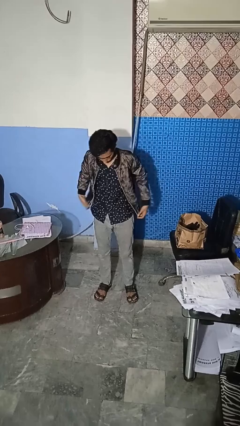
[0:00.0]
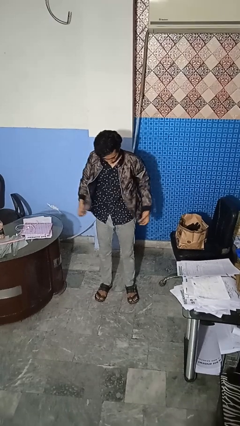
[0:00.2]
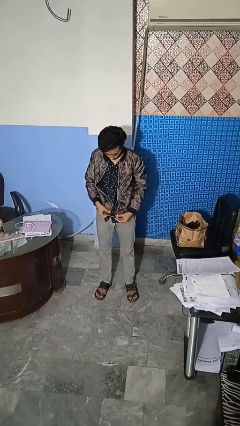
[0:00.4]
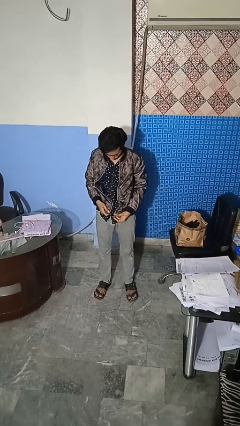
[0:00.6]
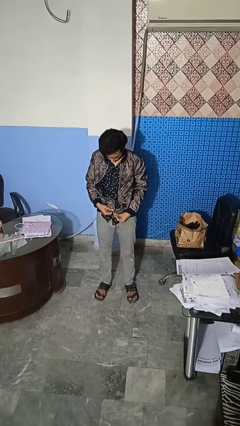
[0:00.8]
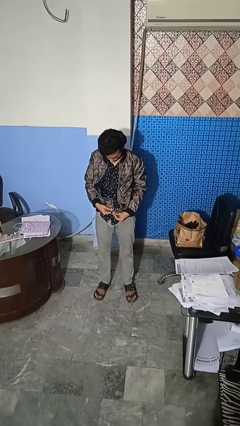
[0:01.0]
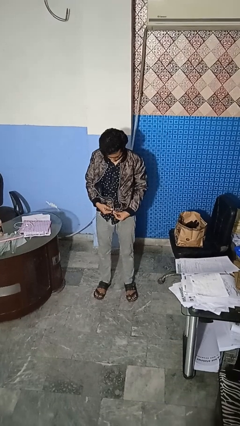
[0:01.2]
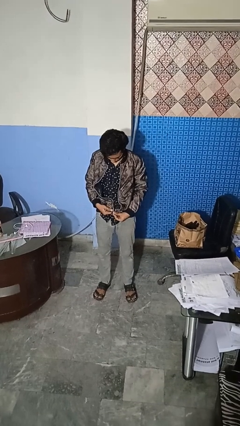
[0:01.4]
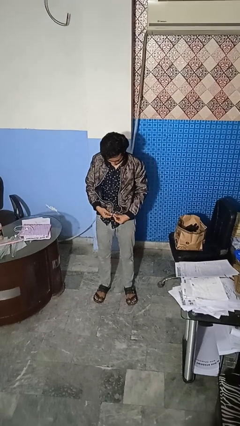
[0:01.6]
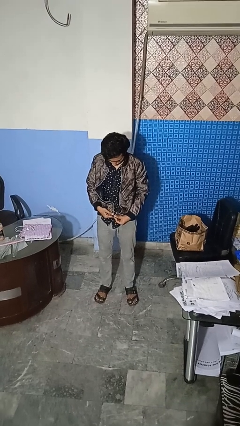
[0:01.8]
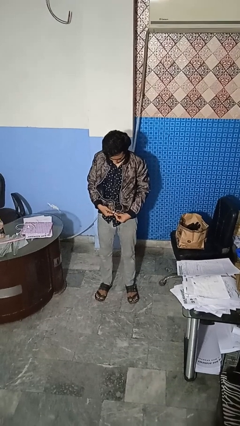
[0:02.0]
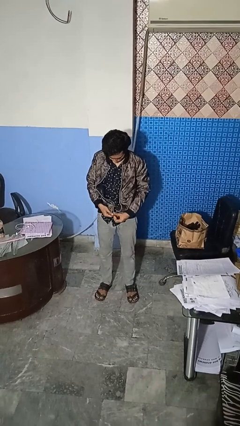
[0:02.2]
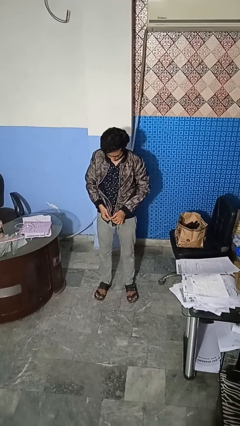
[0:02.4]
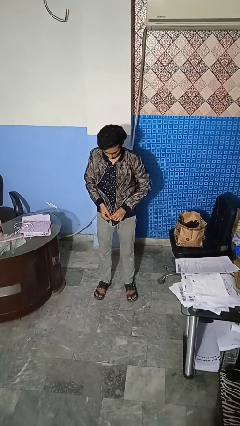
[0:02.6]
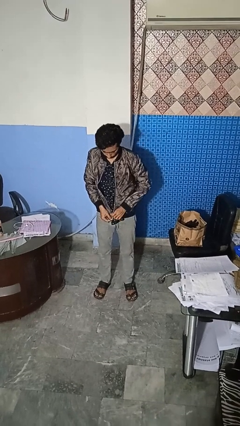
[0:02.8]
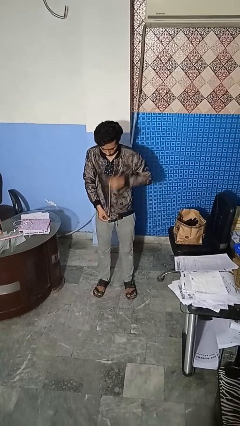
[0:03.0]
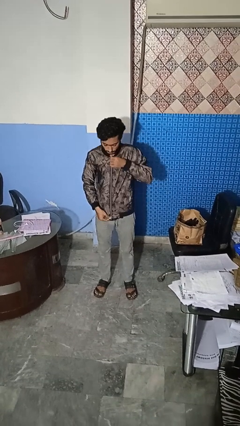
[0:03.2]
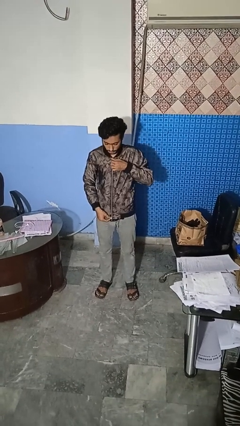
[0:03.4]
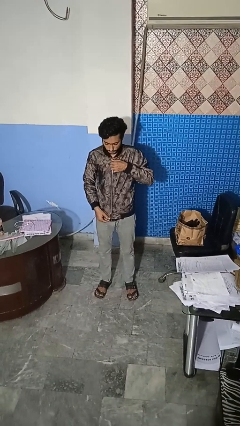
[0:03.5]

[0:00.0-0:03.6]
person zips up jacket

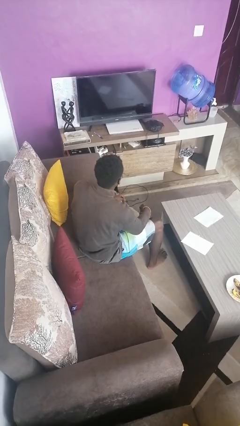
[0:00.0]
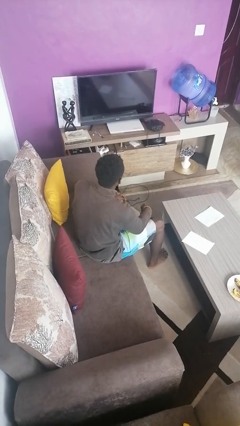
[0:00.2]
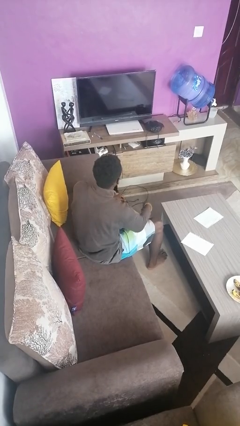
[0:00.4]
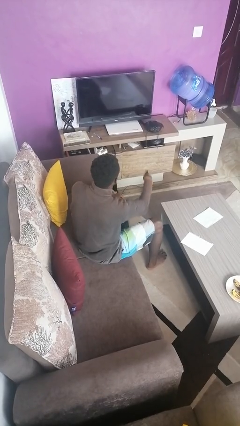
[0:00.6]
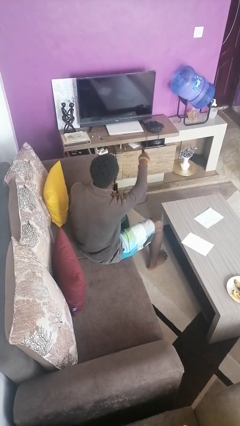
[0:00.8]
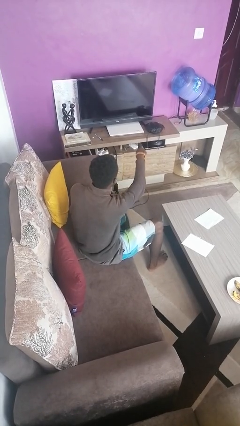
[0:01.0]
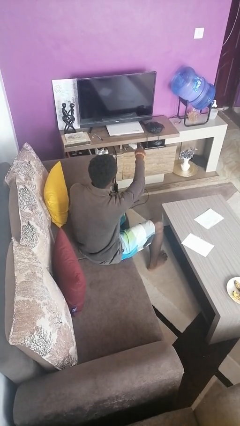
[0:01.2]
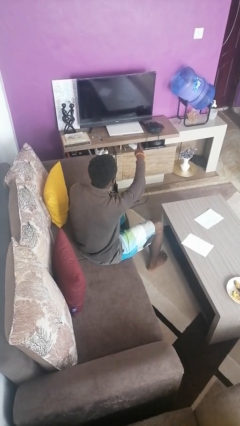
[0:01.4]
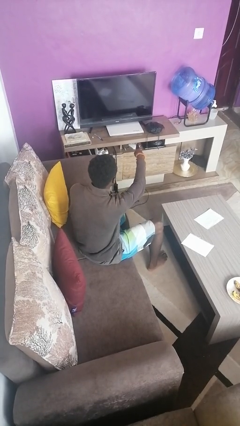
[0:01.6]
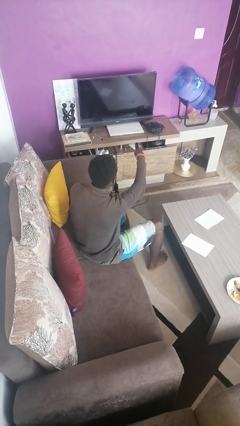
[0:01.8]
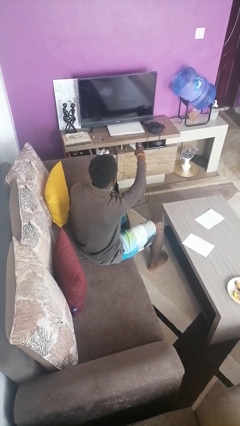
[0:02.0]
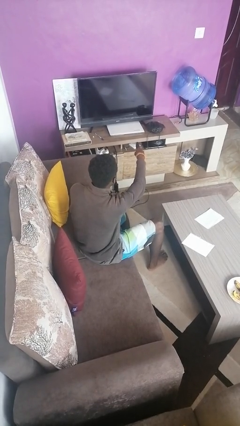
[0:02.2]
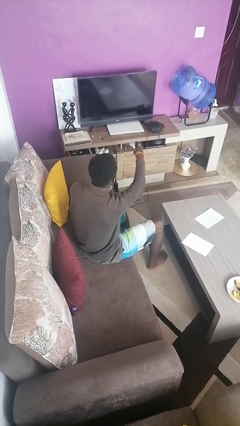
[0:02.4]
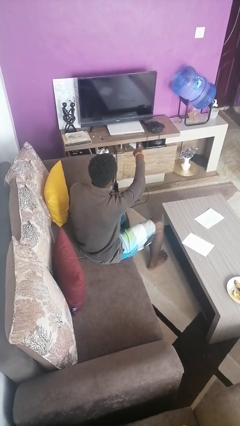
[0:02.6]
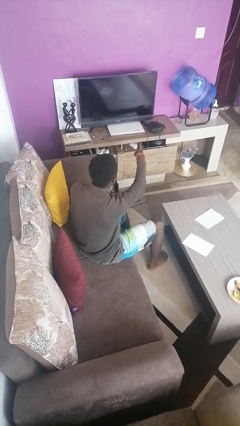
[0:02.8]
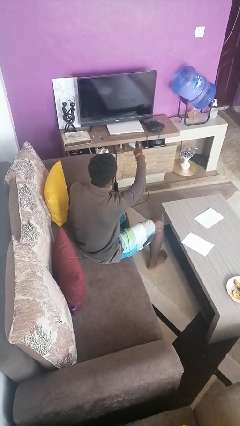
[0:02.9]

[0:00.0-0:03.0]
person uses television remote

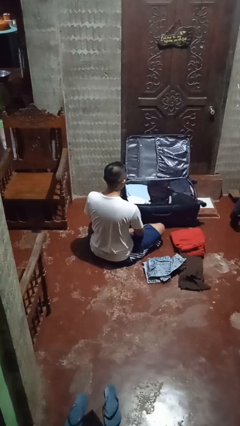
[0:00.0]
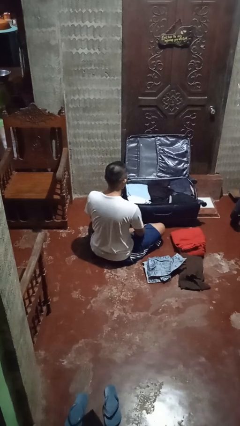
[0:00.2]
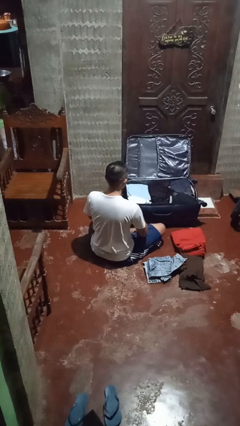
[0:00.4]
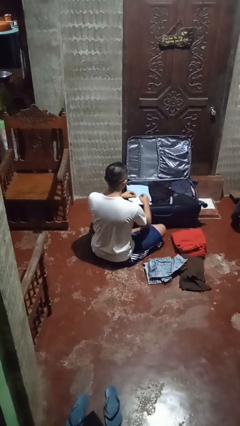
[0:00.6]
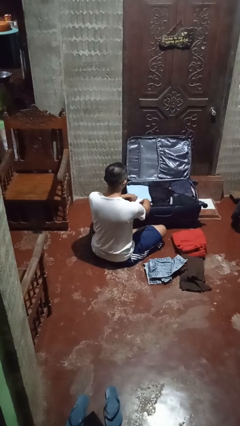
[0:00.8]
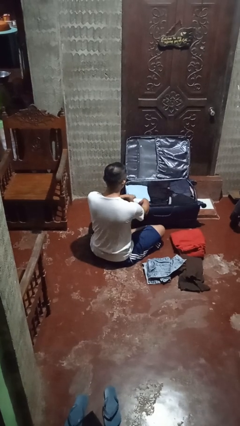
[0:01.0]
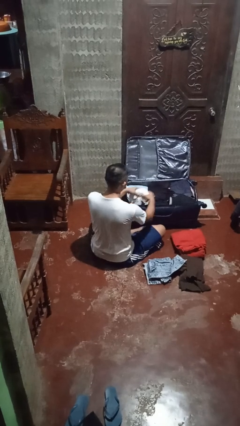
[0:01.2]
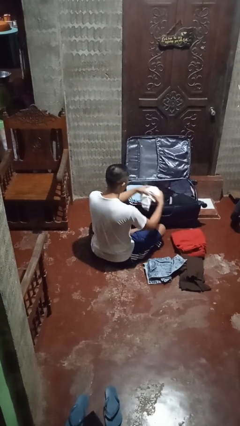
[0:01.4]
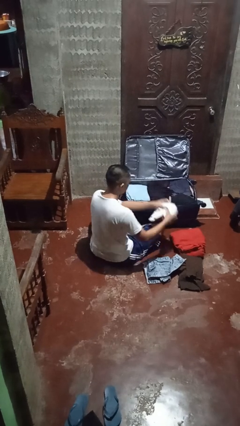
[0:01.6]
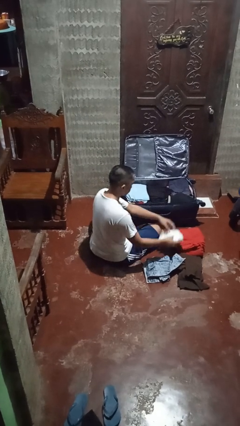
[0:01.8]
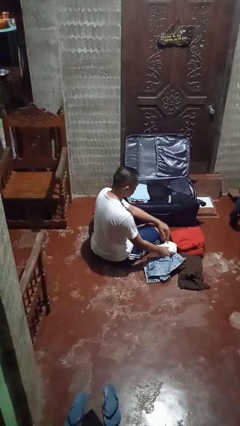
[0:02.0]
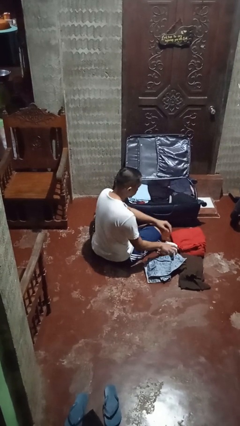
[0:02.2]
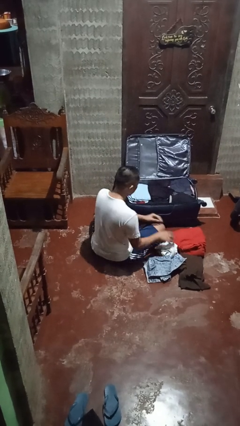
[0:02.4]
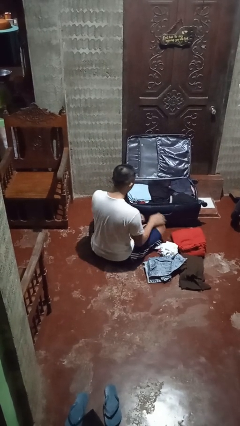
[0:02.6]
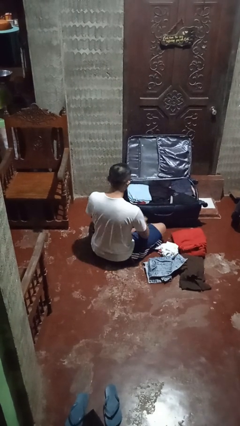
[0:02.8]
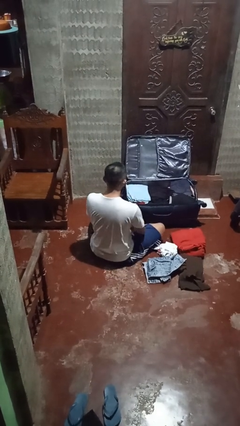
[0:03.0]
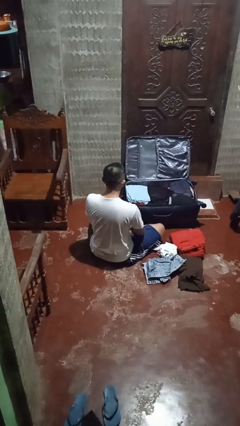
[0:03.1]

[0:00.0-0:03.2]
person unloads clothes from suitcase

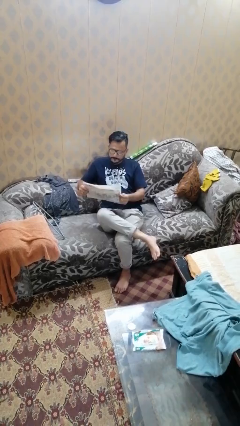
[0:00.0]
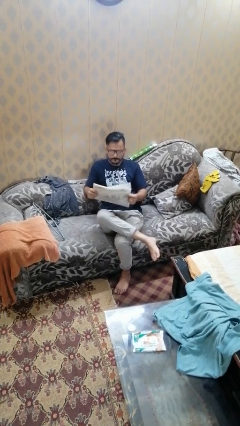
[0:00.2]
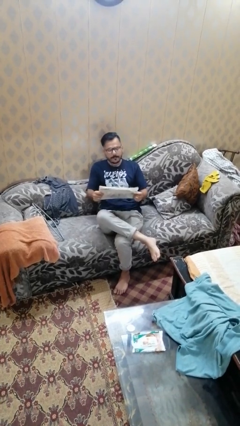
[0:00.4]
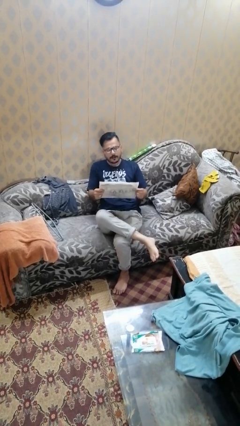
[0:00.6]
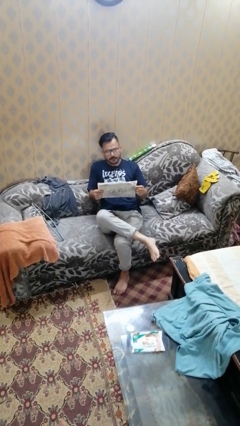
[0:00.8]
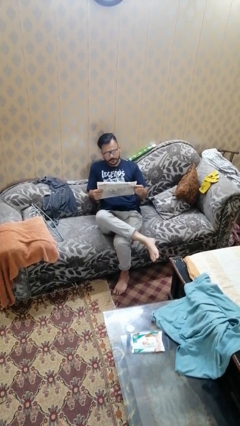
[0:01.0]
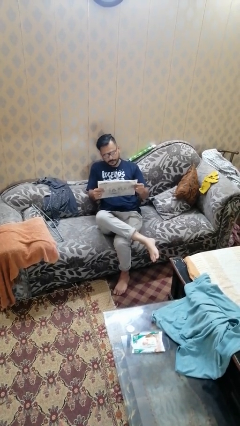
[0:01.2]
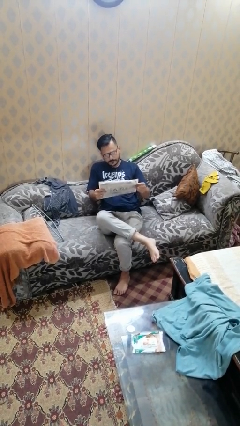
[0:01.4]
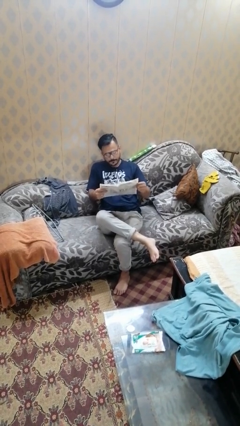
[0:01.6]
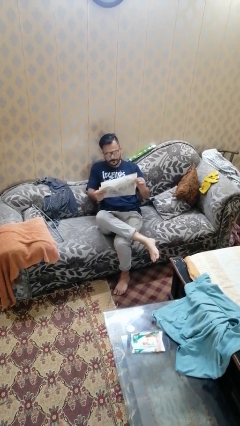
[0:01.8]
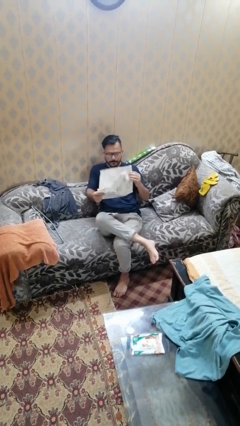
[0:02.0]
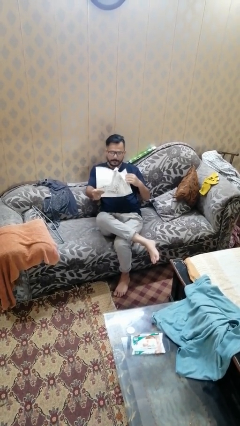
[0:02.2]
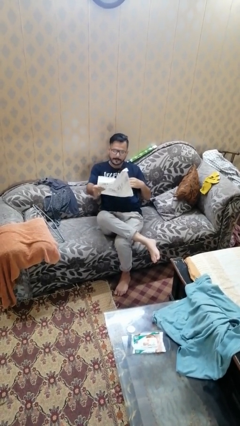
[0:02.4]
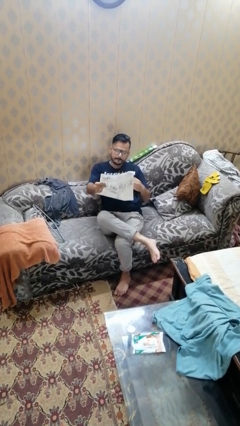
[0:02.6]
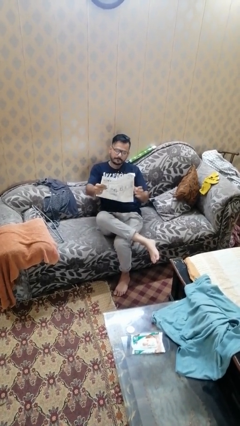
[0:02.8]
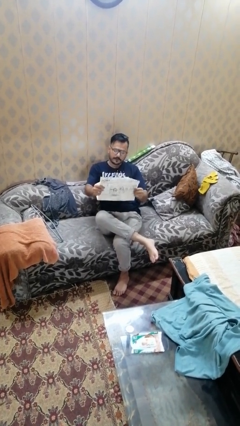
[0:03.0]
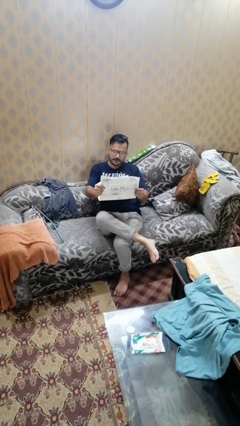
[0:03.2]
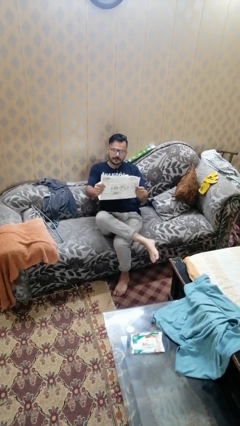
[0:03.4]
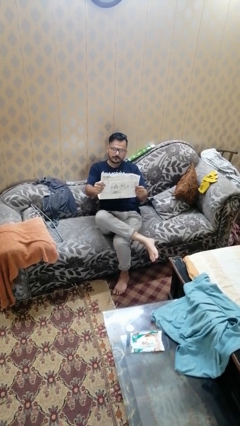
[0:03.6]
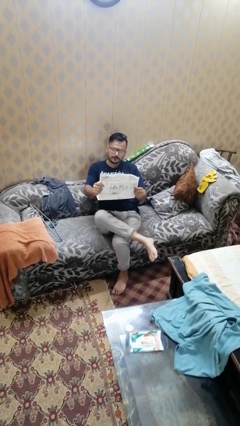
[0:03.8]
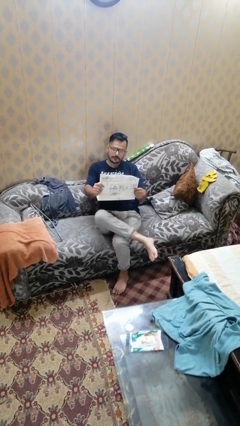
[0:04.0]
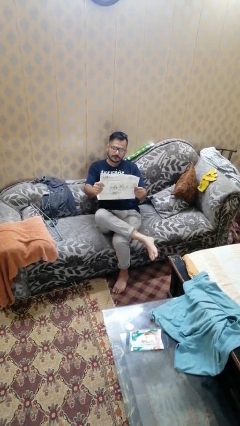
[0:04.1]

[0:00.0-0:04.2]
person reads newspaper

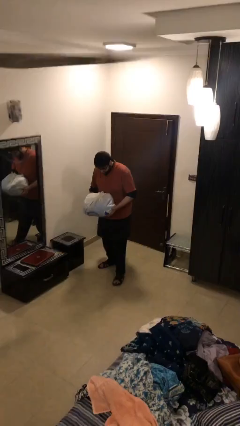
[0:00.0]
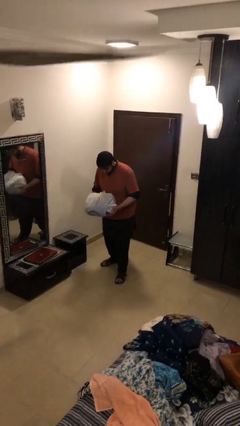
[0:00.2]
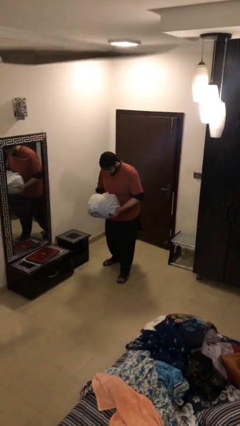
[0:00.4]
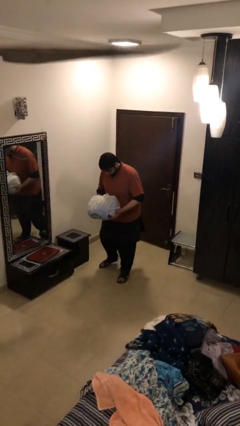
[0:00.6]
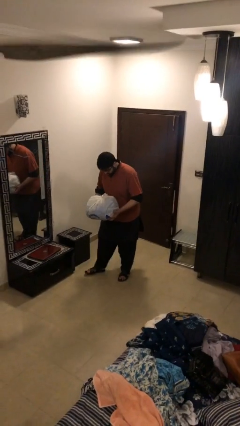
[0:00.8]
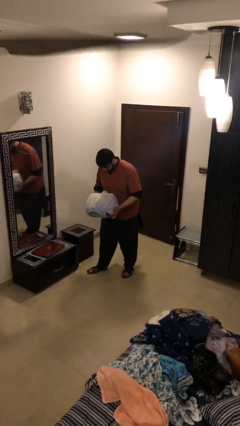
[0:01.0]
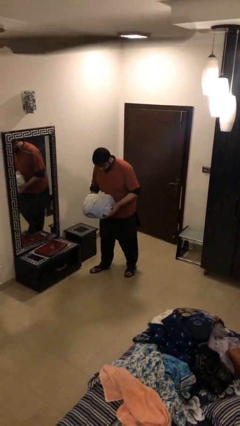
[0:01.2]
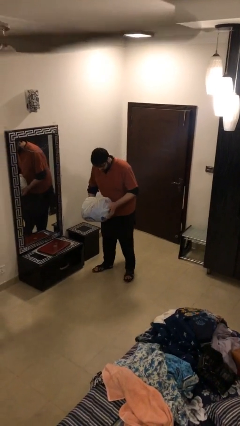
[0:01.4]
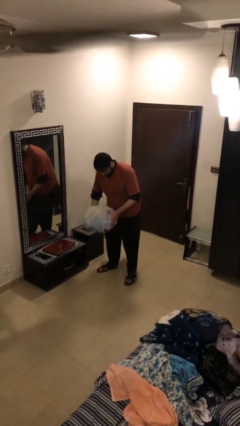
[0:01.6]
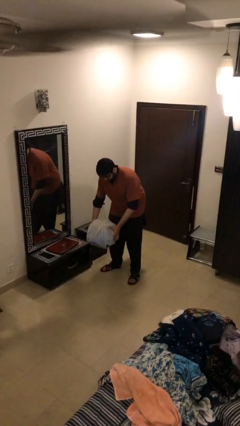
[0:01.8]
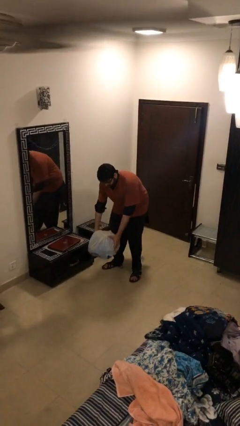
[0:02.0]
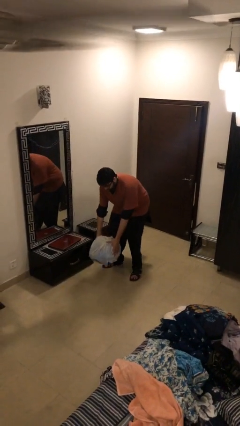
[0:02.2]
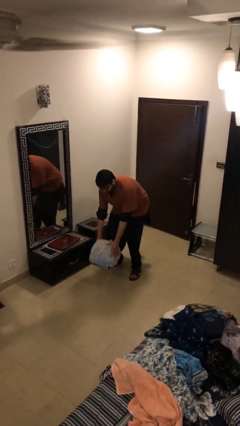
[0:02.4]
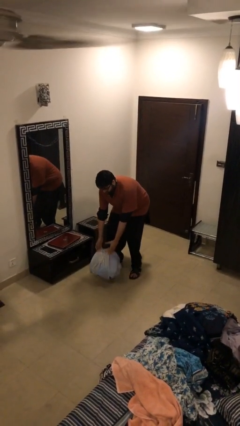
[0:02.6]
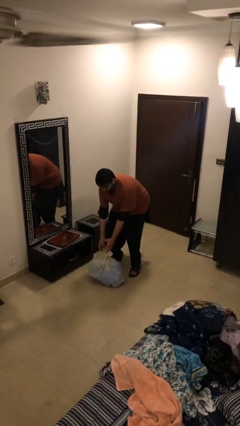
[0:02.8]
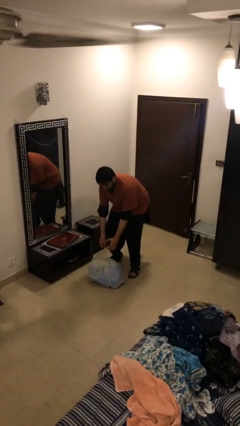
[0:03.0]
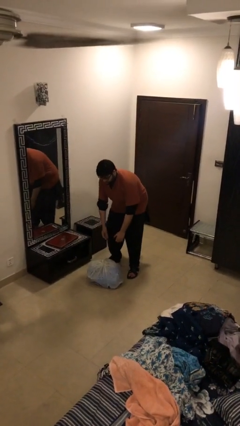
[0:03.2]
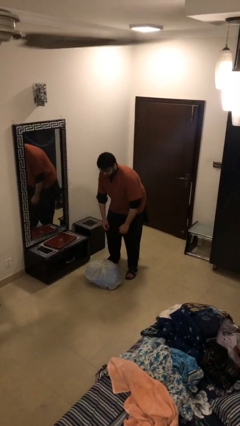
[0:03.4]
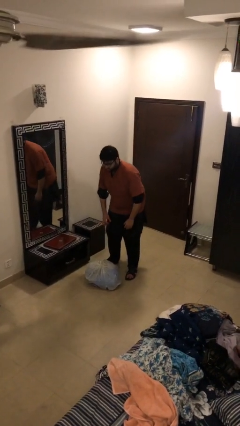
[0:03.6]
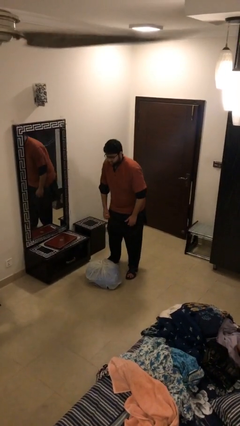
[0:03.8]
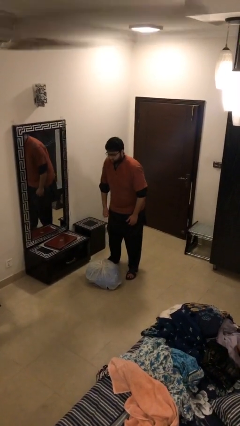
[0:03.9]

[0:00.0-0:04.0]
person puts down object on floor
